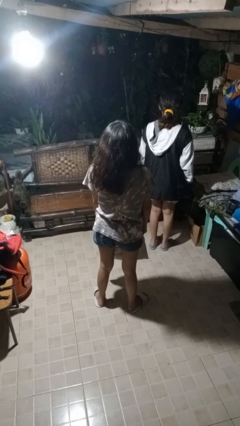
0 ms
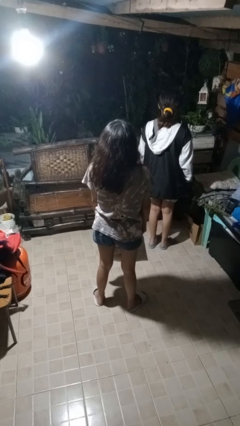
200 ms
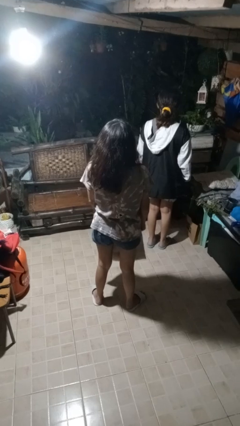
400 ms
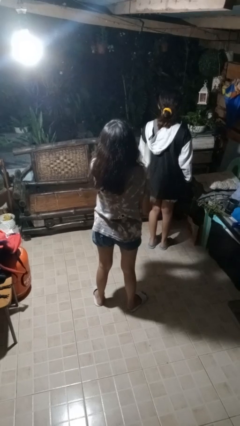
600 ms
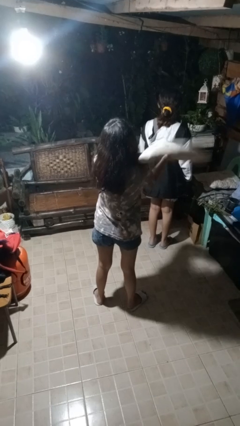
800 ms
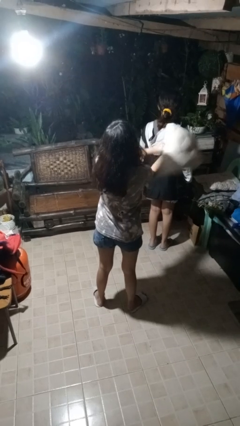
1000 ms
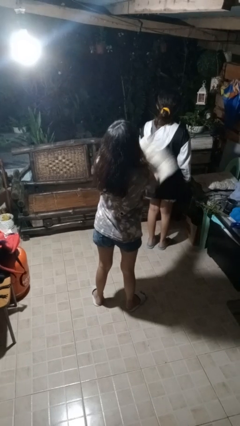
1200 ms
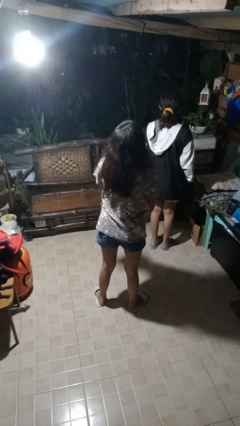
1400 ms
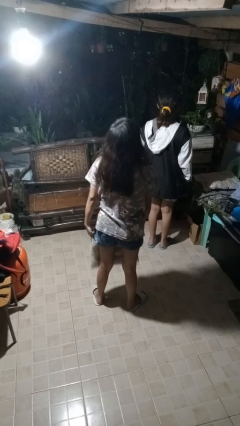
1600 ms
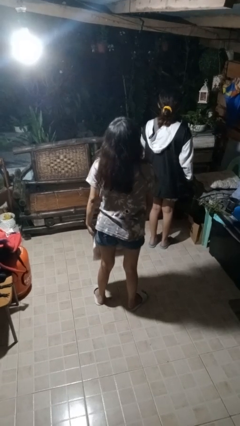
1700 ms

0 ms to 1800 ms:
person hits person with pillow

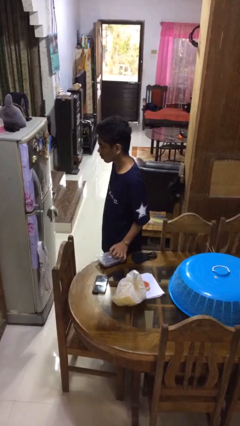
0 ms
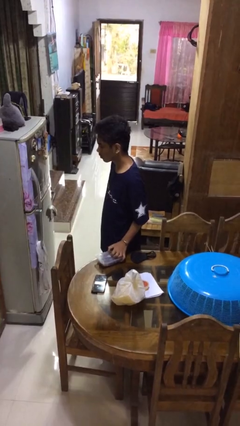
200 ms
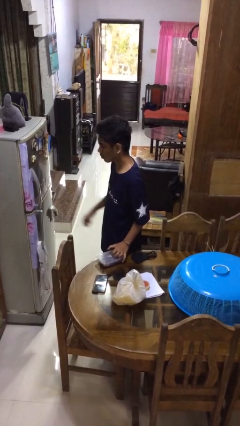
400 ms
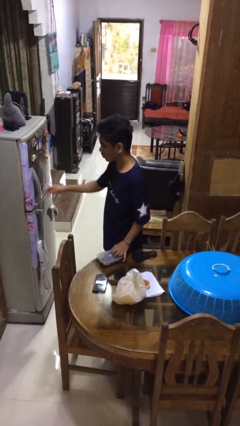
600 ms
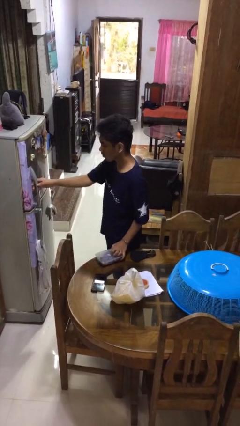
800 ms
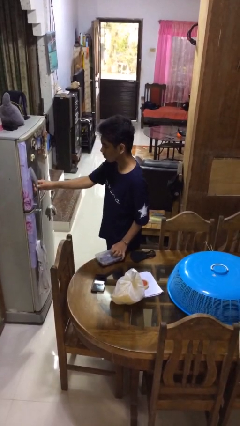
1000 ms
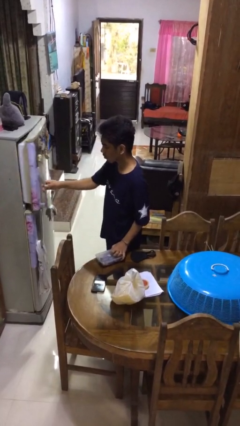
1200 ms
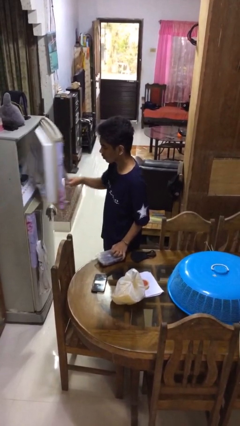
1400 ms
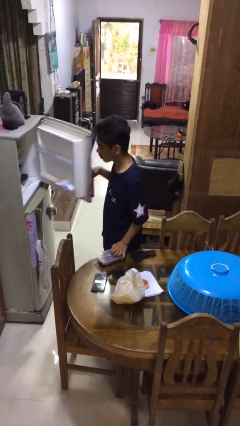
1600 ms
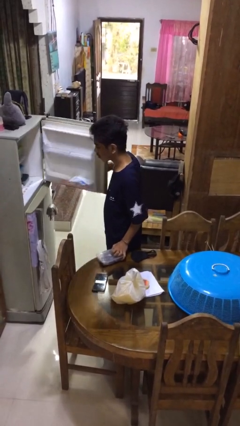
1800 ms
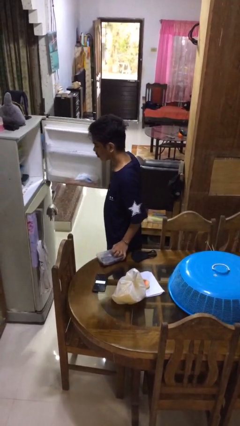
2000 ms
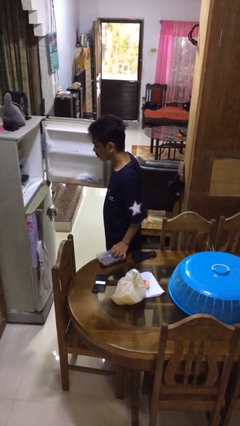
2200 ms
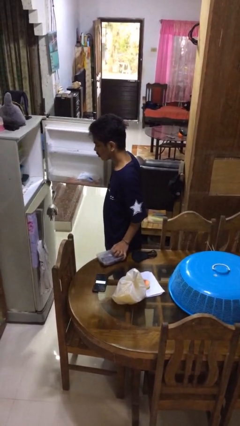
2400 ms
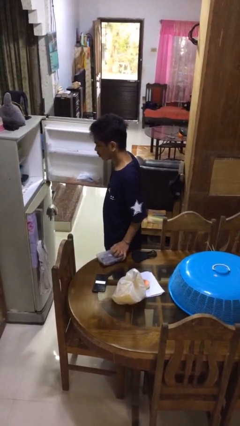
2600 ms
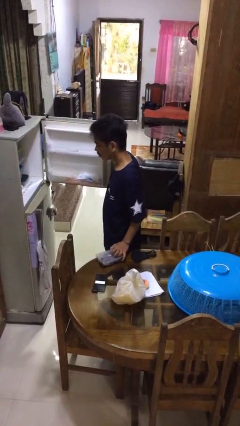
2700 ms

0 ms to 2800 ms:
person opens refrigerator

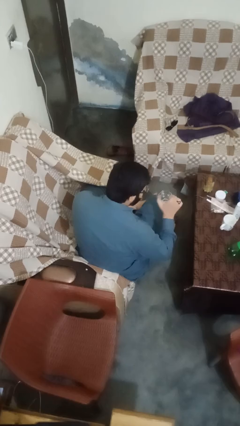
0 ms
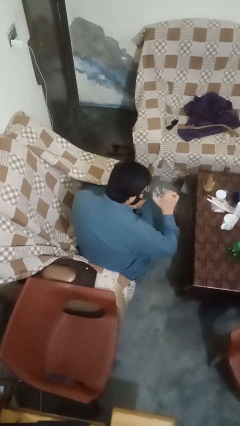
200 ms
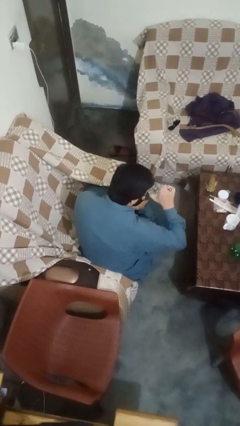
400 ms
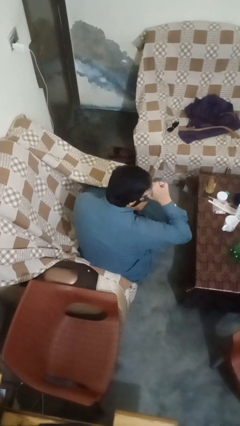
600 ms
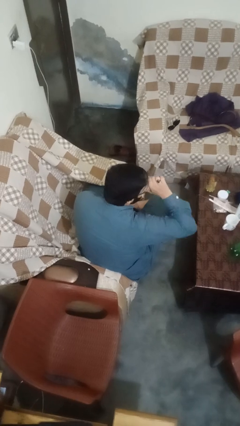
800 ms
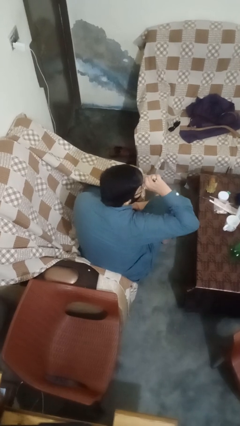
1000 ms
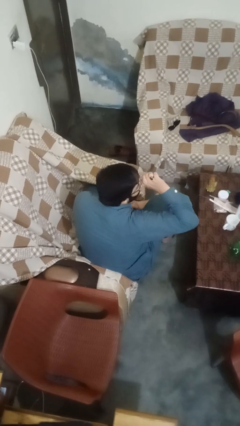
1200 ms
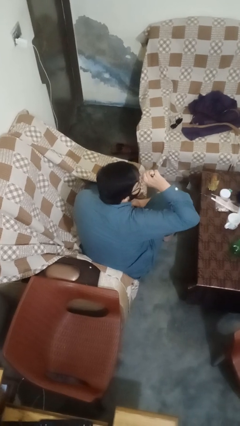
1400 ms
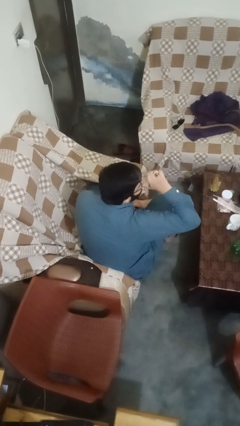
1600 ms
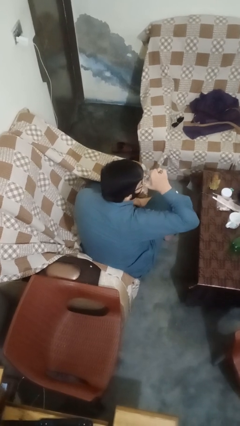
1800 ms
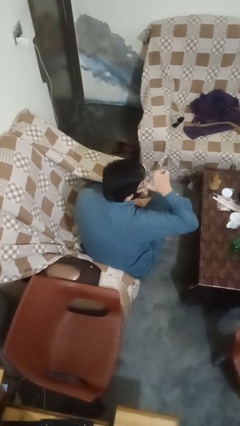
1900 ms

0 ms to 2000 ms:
person drinks from shotglass

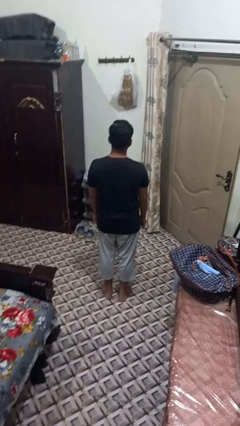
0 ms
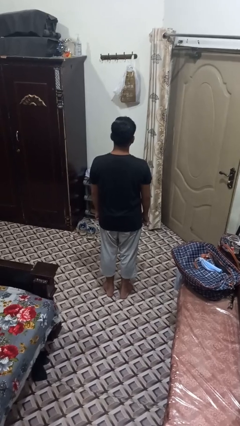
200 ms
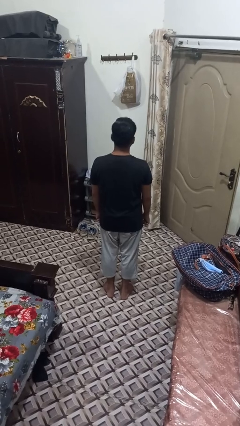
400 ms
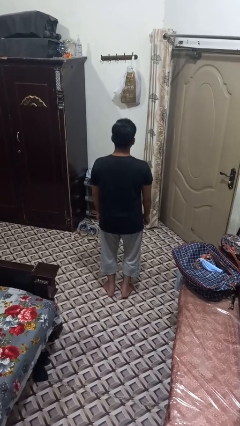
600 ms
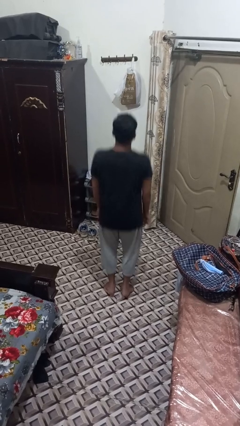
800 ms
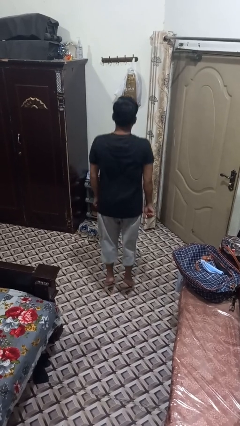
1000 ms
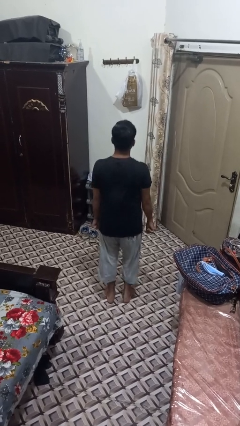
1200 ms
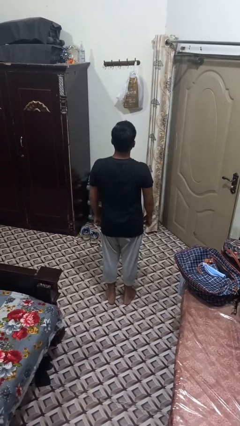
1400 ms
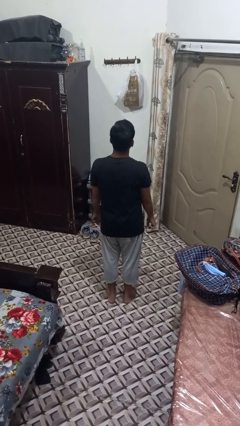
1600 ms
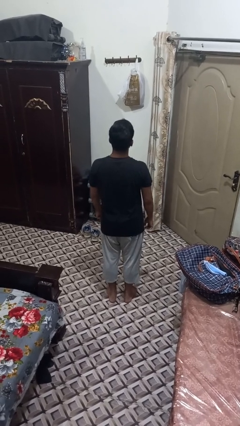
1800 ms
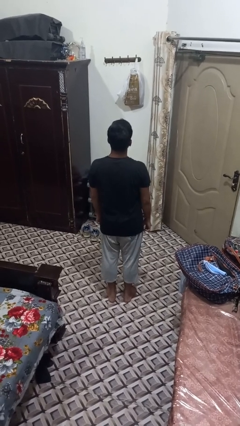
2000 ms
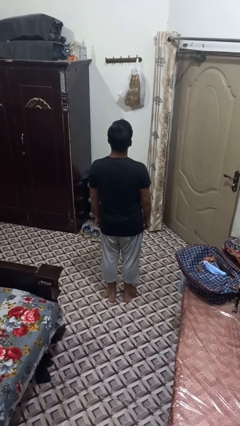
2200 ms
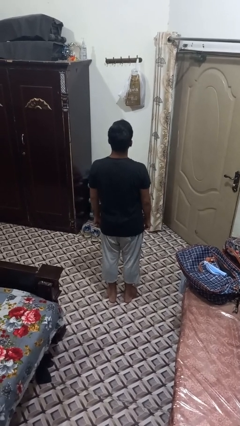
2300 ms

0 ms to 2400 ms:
person jumps

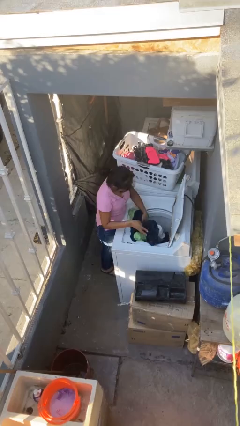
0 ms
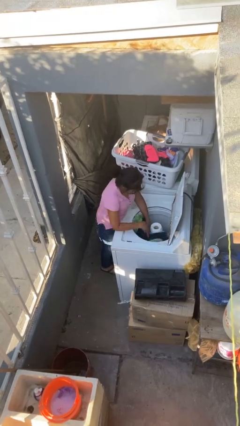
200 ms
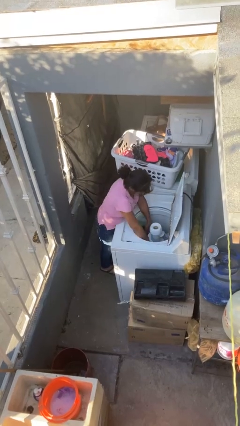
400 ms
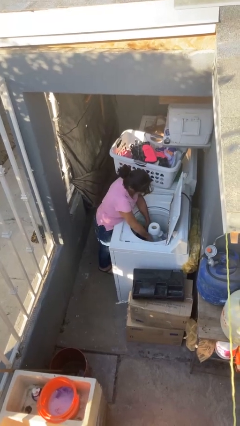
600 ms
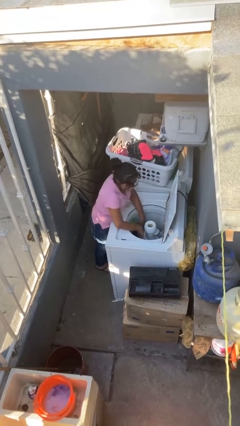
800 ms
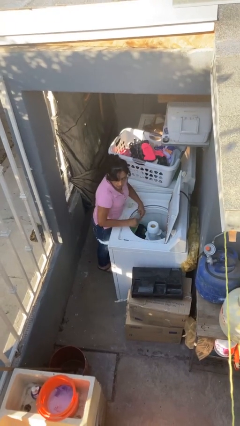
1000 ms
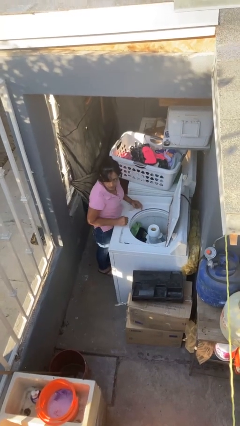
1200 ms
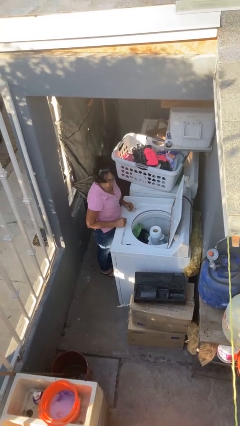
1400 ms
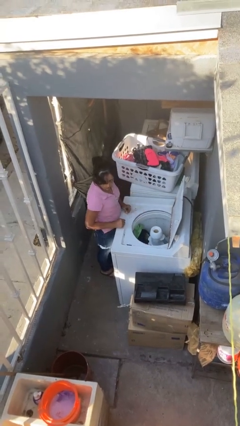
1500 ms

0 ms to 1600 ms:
person unloads clotheswasher

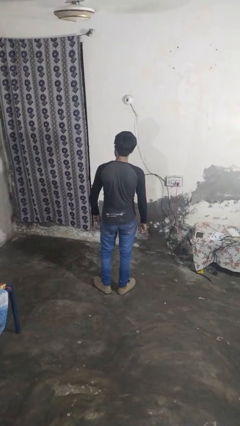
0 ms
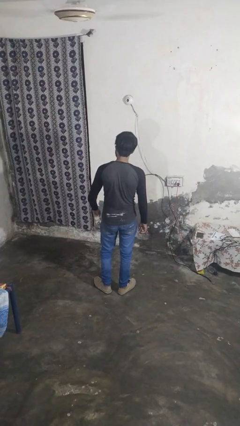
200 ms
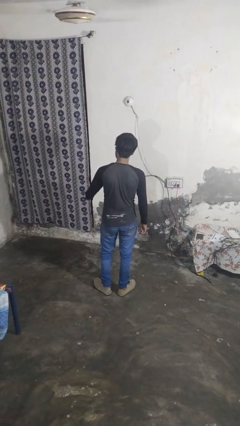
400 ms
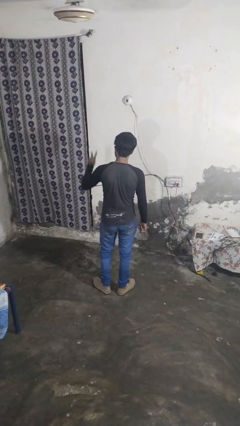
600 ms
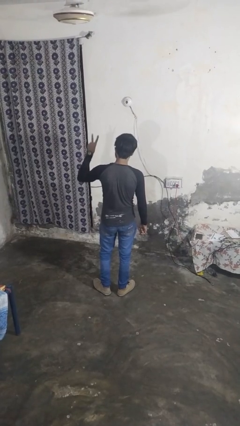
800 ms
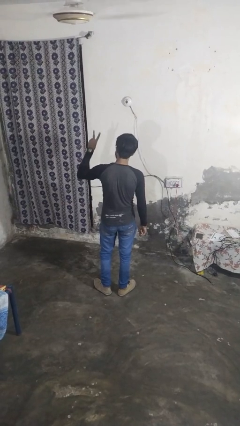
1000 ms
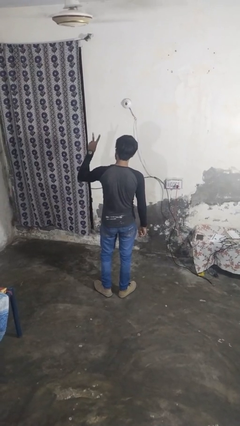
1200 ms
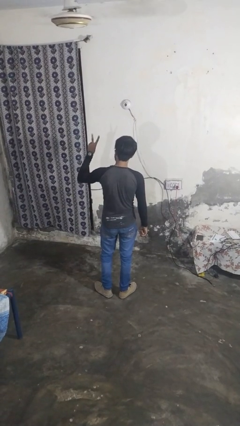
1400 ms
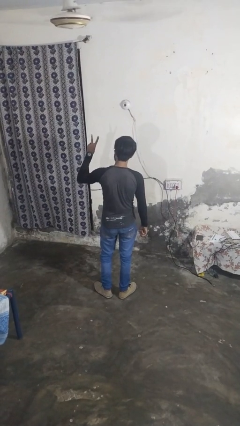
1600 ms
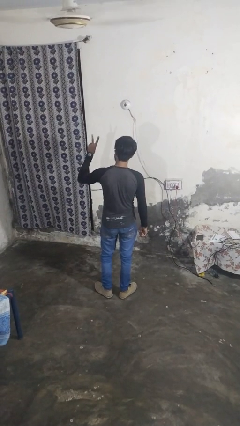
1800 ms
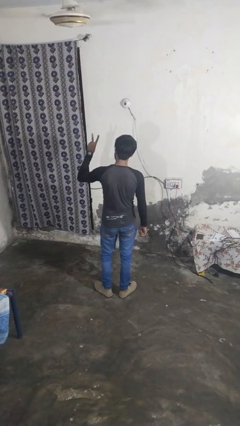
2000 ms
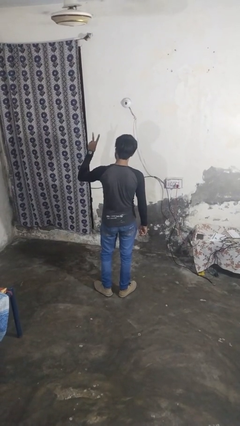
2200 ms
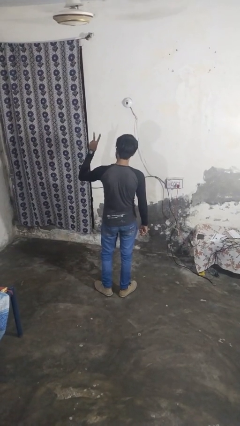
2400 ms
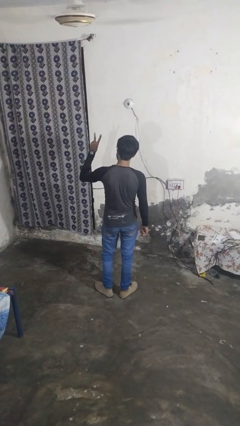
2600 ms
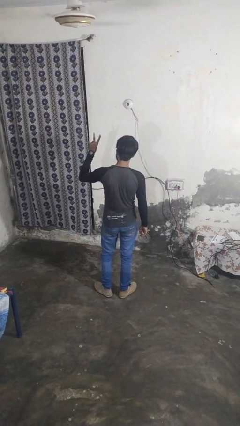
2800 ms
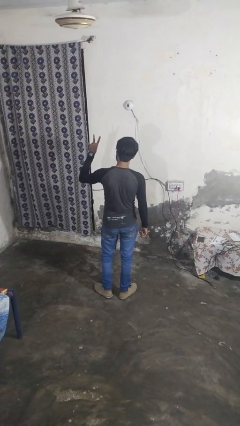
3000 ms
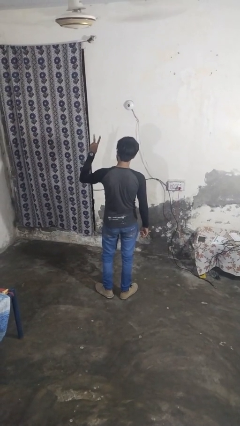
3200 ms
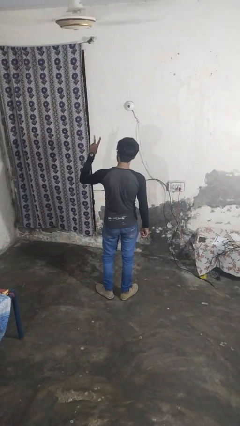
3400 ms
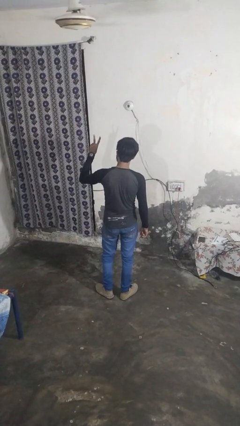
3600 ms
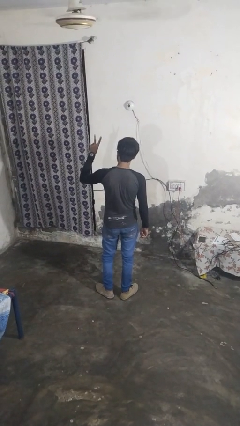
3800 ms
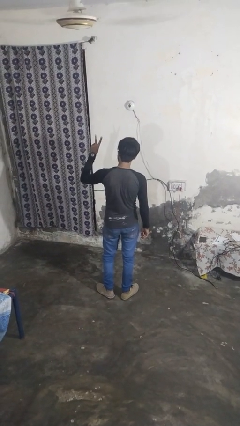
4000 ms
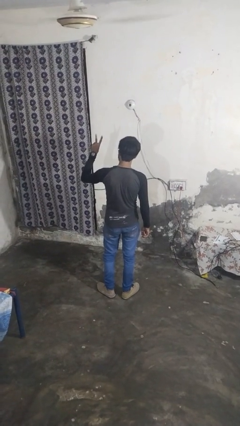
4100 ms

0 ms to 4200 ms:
person gestures peace

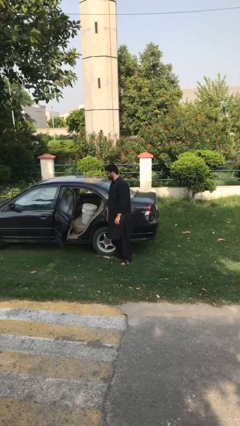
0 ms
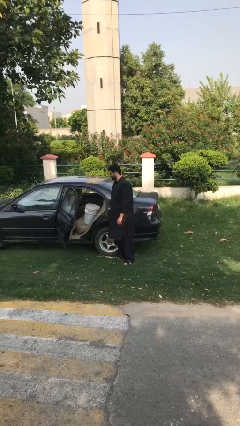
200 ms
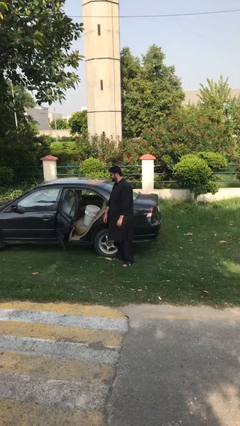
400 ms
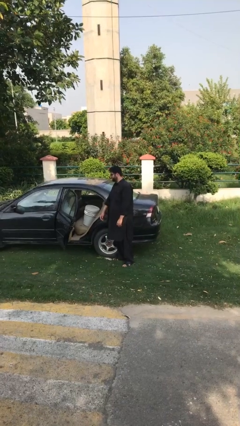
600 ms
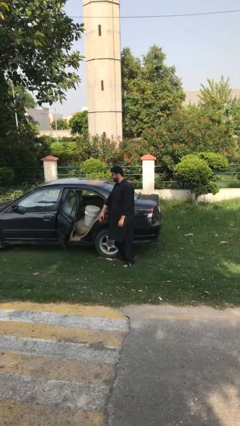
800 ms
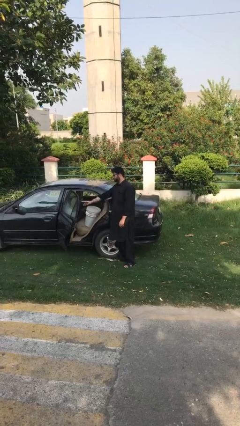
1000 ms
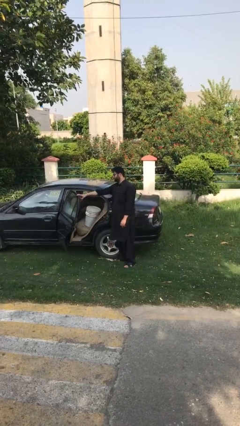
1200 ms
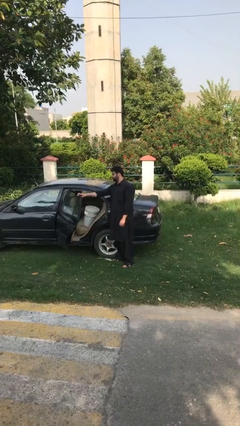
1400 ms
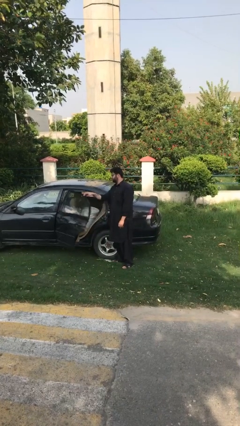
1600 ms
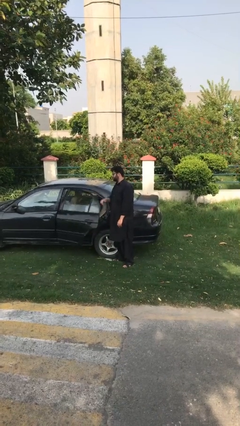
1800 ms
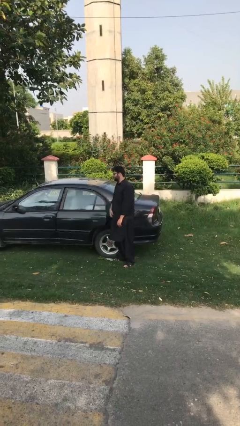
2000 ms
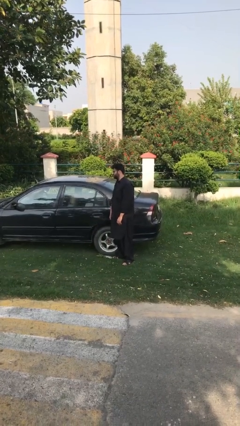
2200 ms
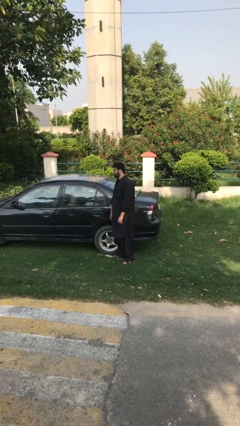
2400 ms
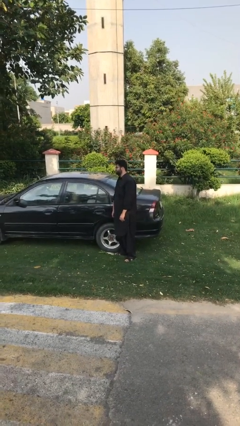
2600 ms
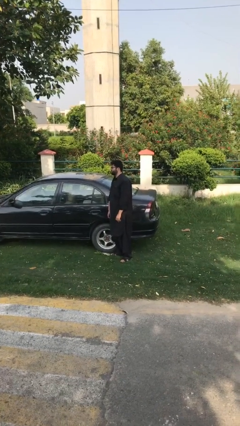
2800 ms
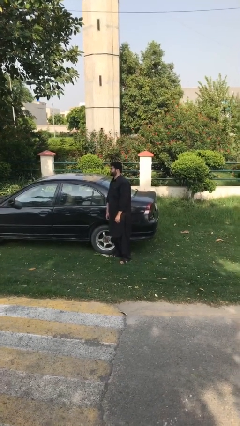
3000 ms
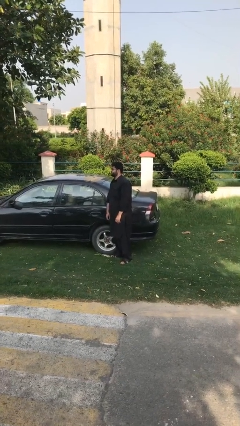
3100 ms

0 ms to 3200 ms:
person closes car door
